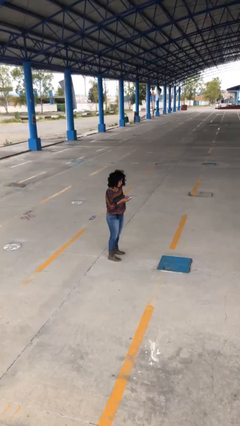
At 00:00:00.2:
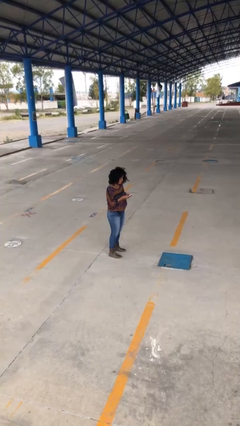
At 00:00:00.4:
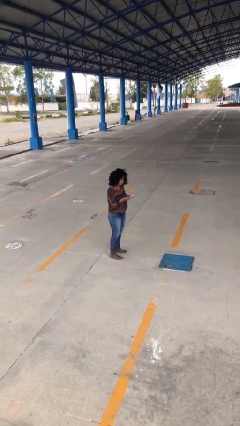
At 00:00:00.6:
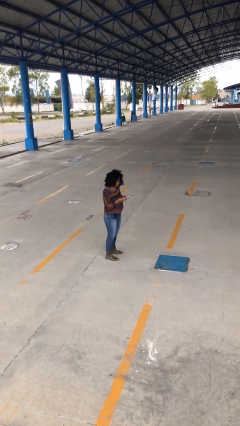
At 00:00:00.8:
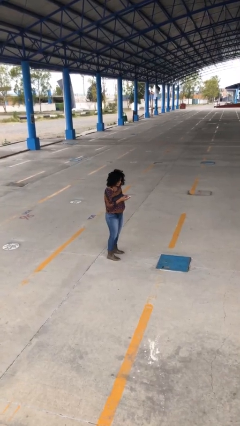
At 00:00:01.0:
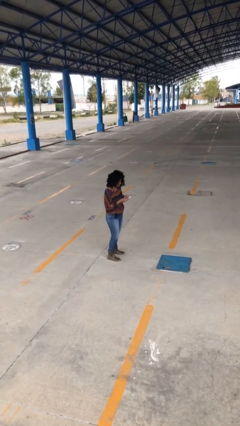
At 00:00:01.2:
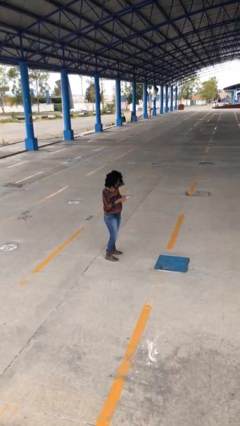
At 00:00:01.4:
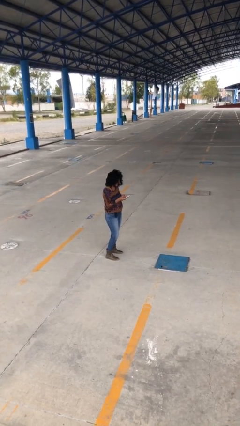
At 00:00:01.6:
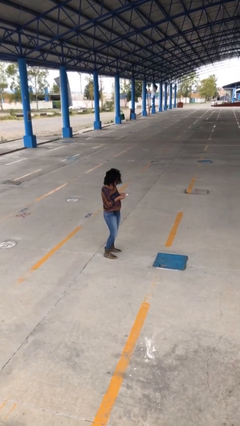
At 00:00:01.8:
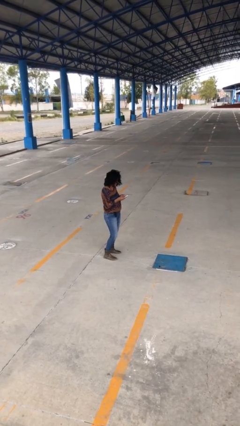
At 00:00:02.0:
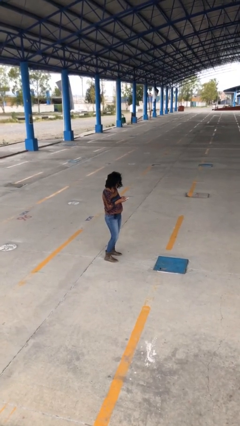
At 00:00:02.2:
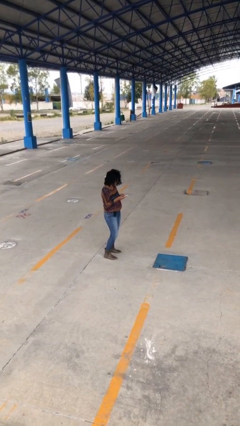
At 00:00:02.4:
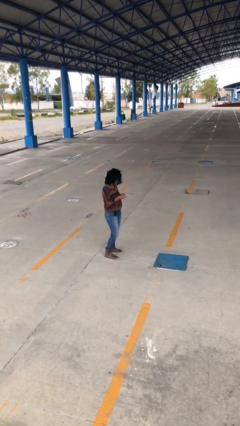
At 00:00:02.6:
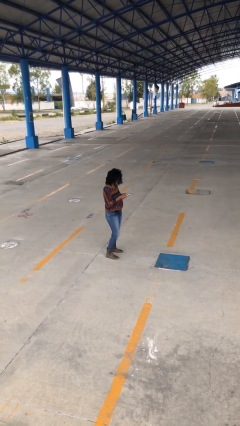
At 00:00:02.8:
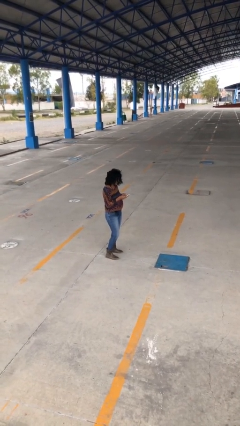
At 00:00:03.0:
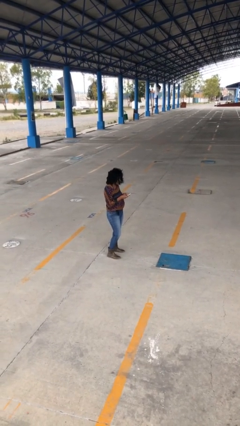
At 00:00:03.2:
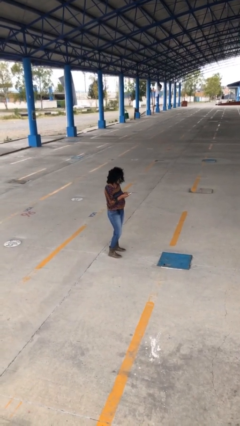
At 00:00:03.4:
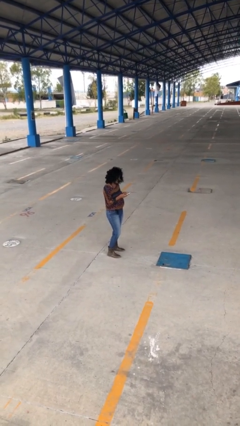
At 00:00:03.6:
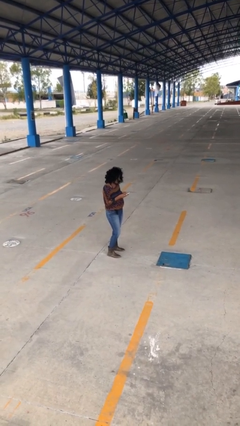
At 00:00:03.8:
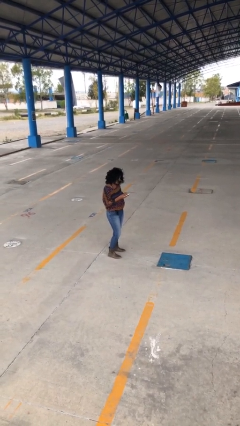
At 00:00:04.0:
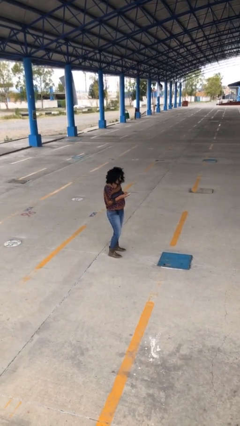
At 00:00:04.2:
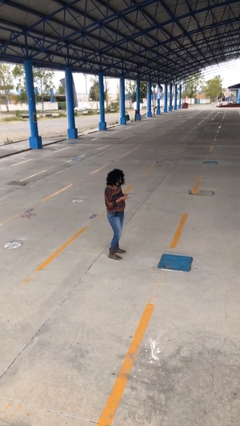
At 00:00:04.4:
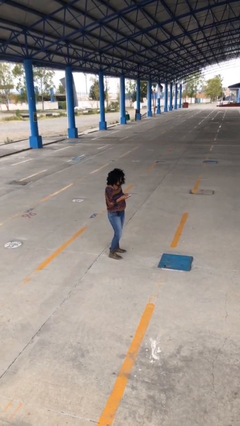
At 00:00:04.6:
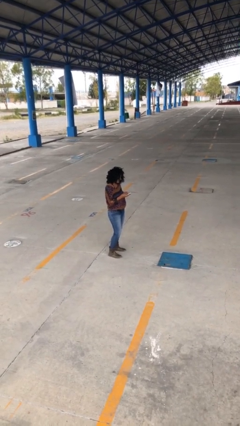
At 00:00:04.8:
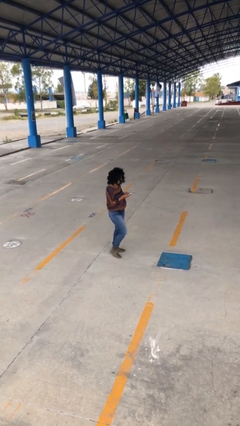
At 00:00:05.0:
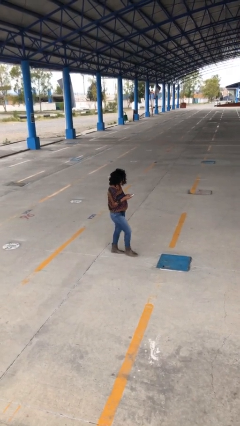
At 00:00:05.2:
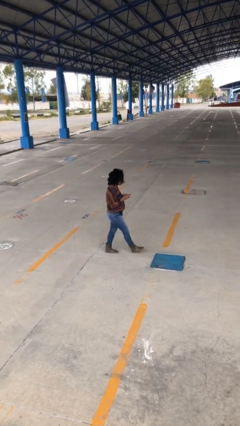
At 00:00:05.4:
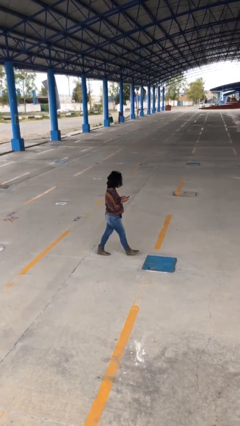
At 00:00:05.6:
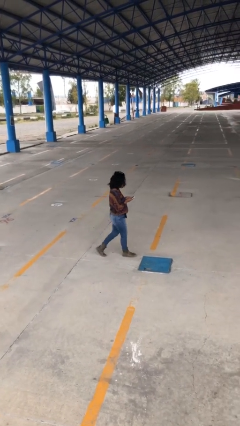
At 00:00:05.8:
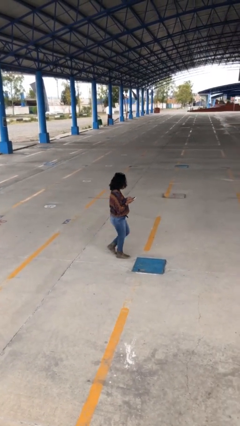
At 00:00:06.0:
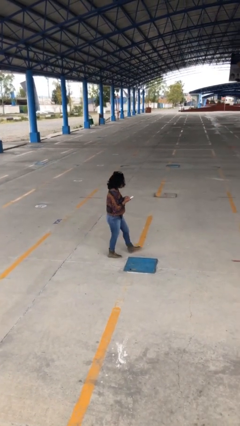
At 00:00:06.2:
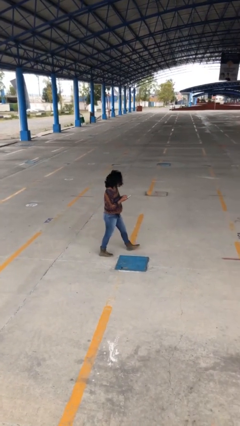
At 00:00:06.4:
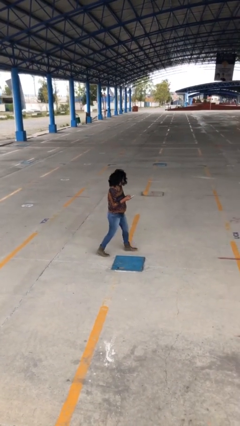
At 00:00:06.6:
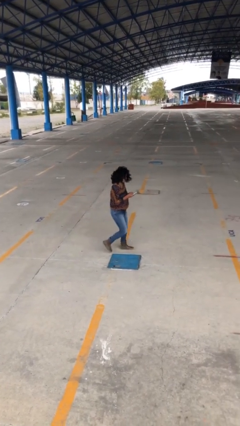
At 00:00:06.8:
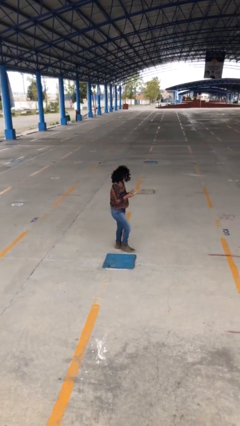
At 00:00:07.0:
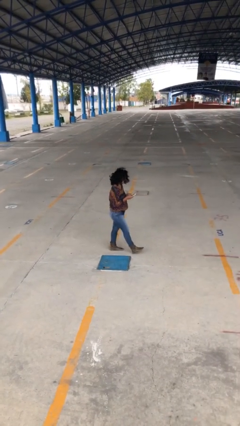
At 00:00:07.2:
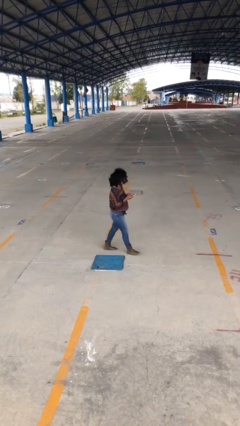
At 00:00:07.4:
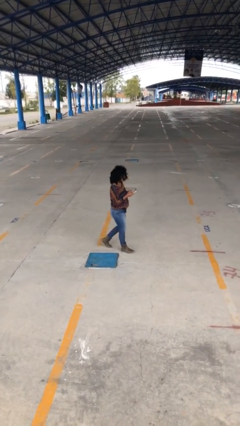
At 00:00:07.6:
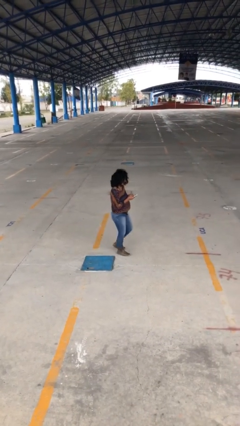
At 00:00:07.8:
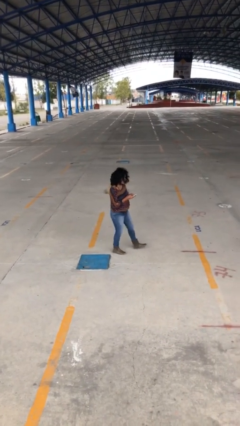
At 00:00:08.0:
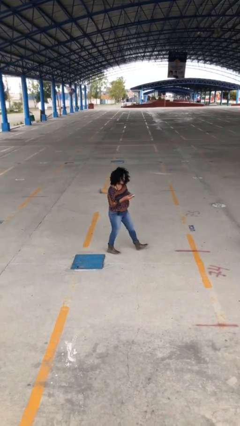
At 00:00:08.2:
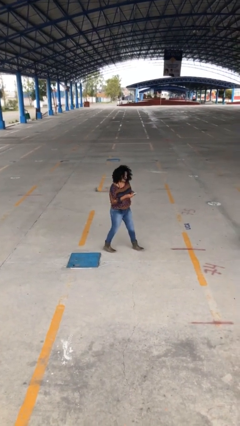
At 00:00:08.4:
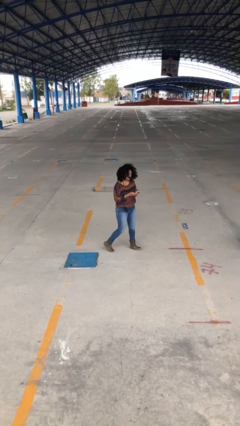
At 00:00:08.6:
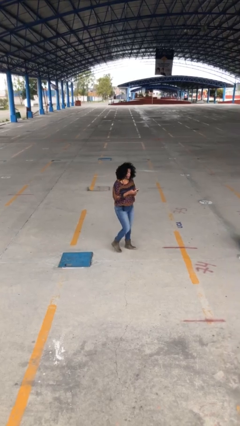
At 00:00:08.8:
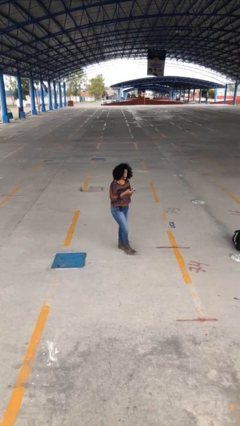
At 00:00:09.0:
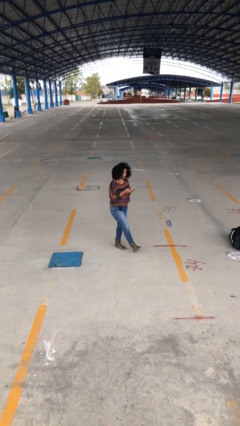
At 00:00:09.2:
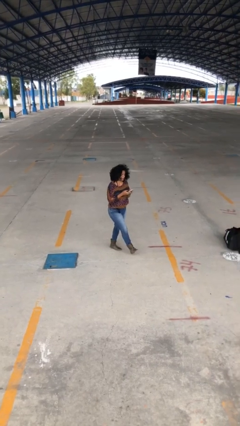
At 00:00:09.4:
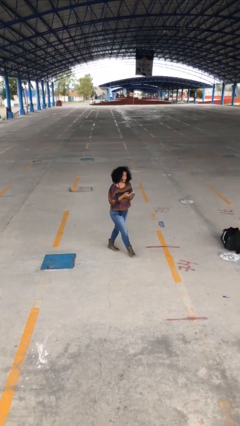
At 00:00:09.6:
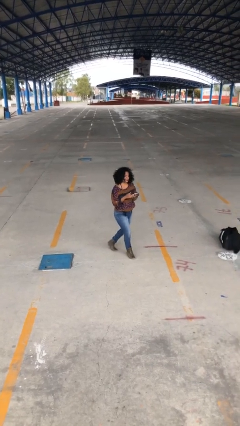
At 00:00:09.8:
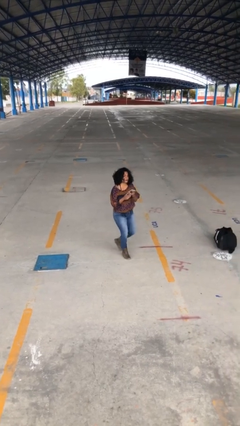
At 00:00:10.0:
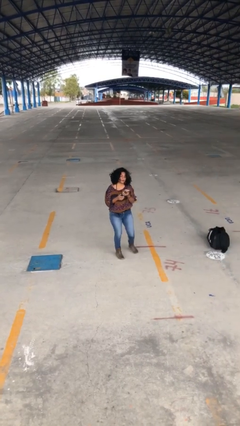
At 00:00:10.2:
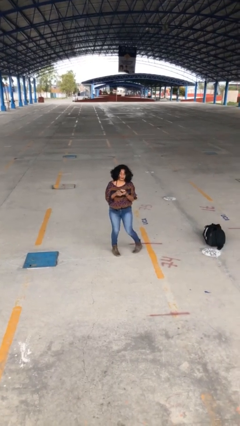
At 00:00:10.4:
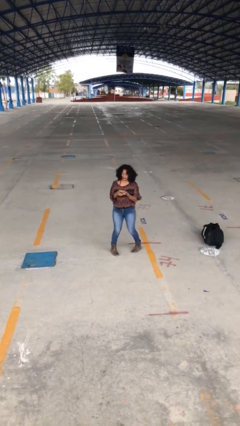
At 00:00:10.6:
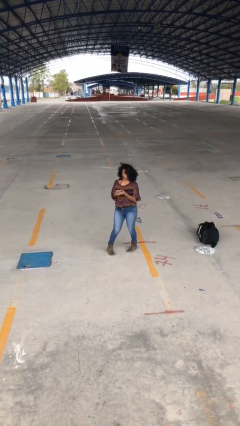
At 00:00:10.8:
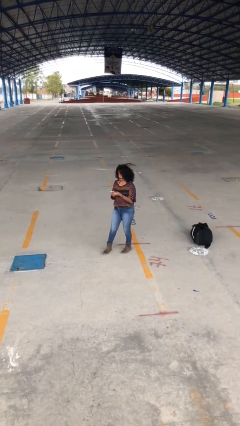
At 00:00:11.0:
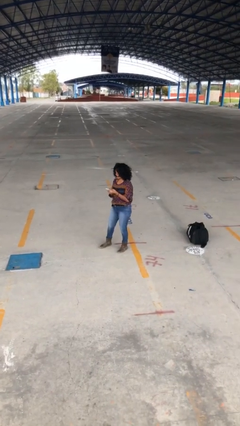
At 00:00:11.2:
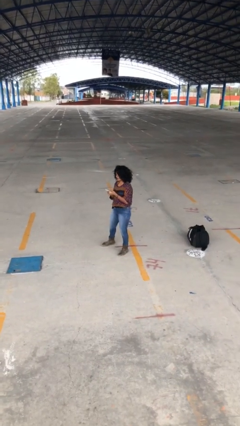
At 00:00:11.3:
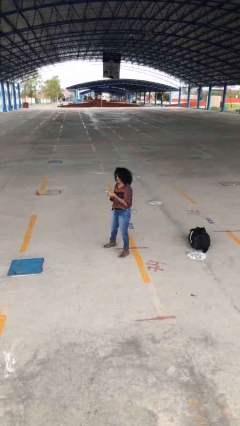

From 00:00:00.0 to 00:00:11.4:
person texts on phone

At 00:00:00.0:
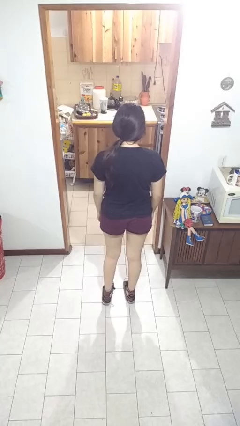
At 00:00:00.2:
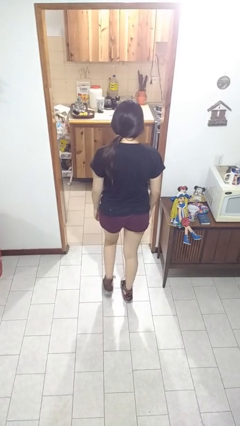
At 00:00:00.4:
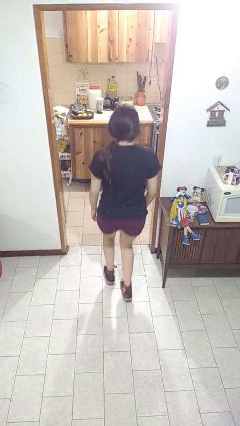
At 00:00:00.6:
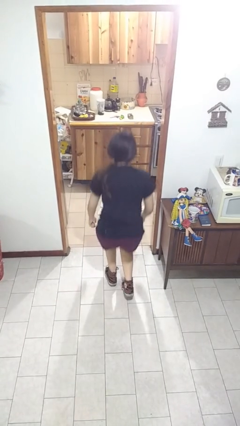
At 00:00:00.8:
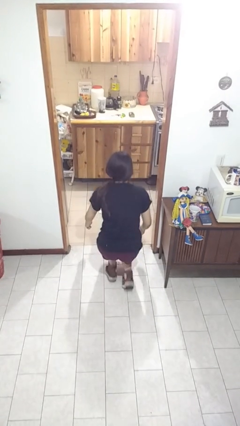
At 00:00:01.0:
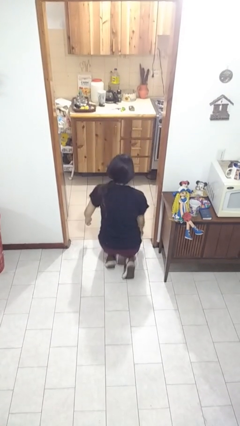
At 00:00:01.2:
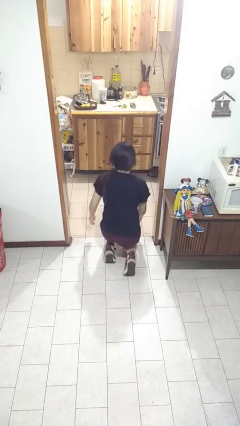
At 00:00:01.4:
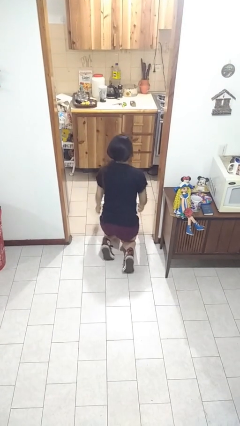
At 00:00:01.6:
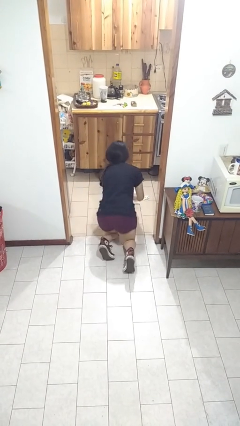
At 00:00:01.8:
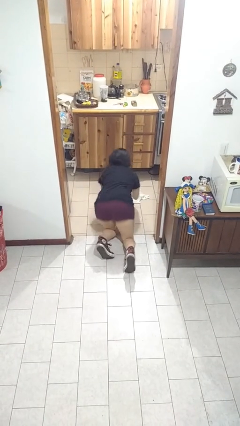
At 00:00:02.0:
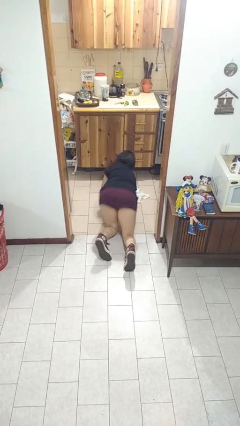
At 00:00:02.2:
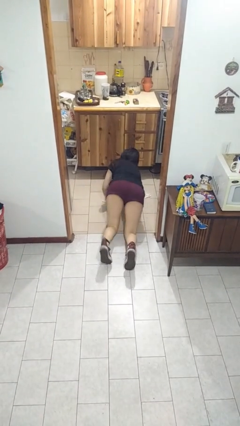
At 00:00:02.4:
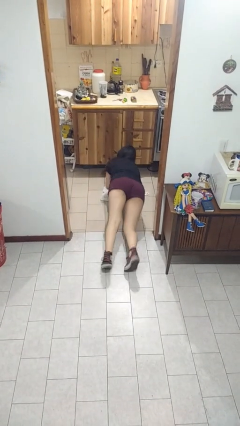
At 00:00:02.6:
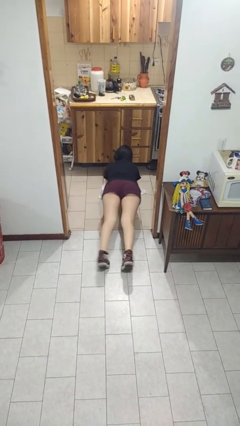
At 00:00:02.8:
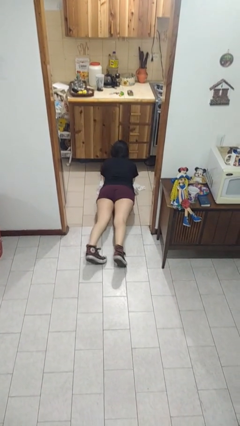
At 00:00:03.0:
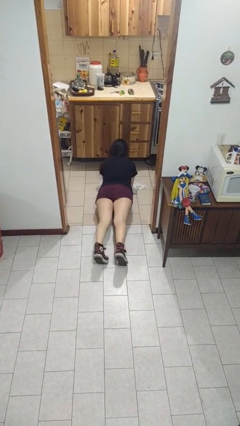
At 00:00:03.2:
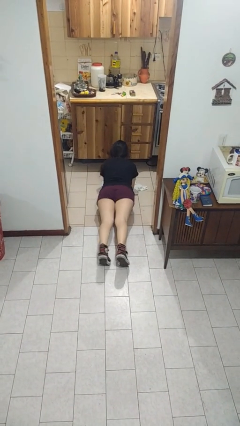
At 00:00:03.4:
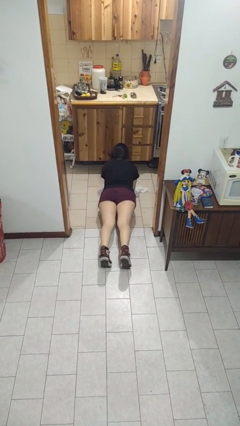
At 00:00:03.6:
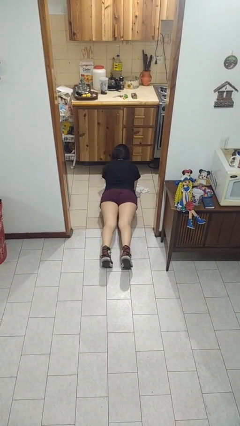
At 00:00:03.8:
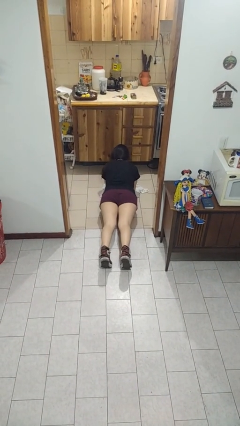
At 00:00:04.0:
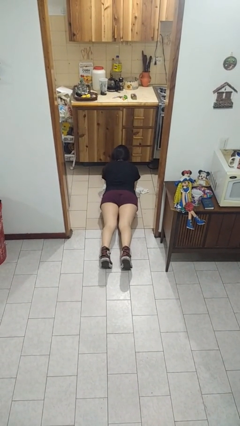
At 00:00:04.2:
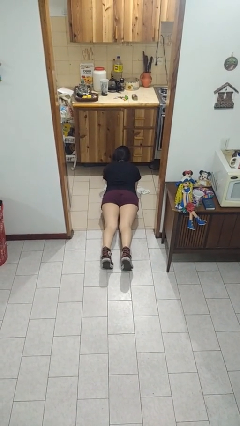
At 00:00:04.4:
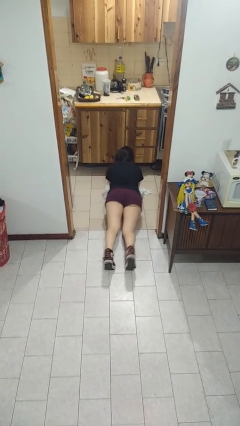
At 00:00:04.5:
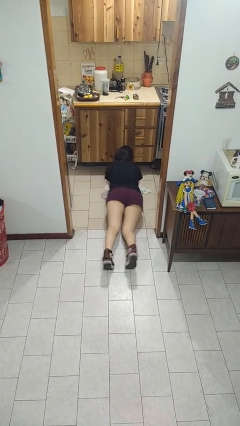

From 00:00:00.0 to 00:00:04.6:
person exercises with plank

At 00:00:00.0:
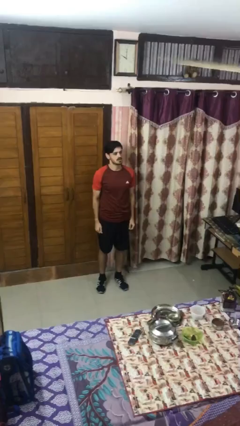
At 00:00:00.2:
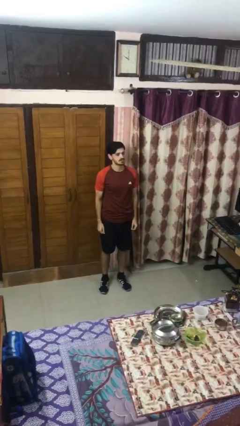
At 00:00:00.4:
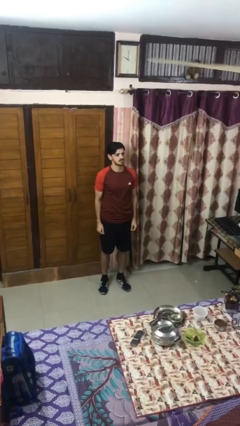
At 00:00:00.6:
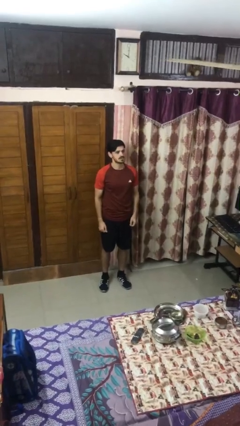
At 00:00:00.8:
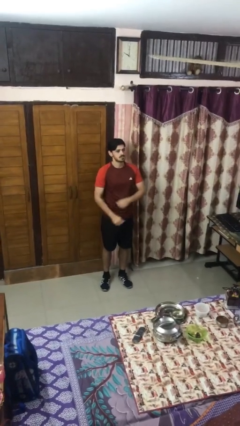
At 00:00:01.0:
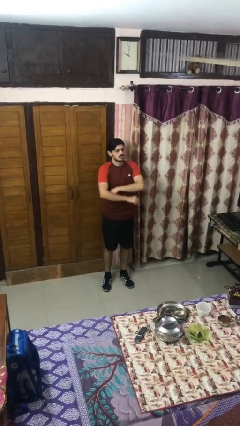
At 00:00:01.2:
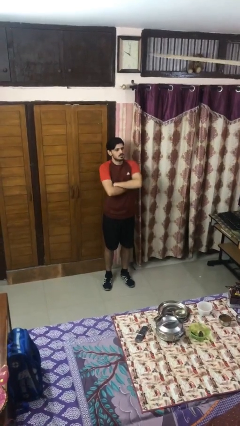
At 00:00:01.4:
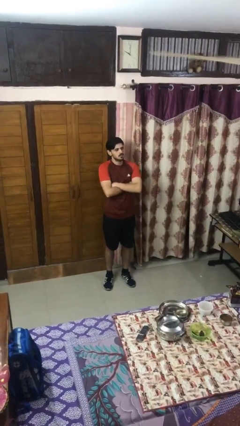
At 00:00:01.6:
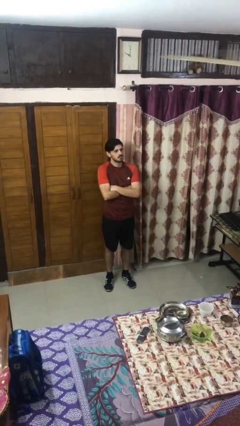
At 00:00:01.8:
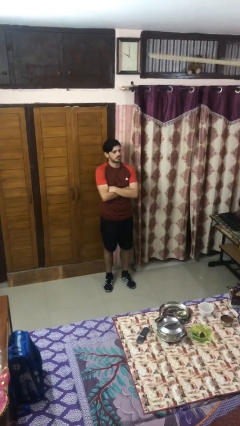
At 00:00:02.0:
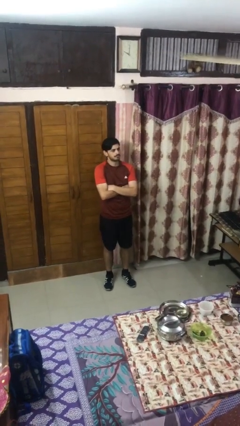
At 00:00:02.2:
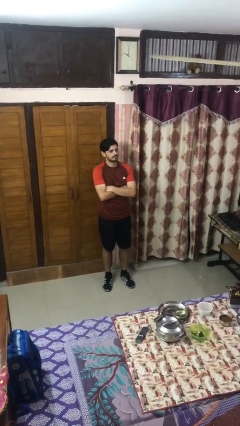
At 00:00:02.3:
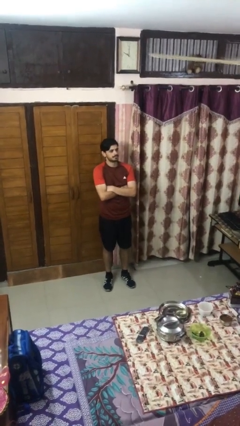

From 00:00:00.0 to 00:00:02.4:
person crosses arms
